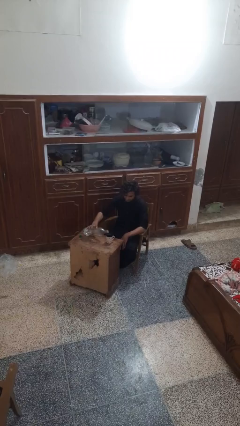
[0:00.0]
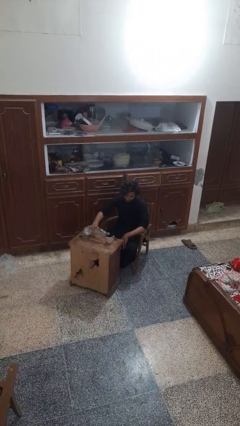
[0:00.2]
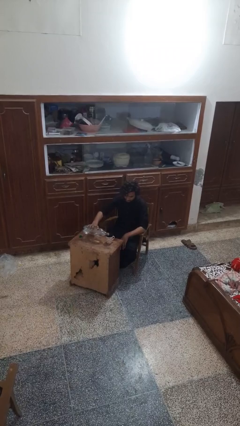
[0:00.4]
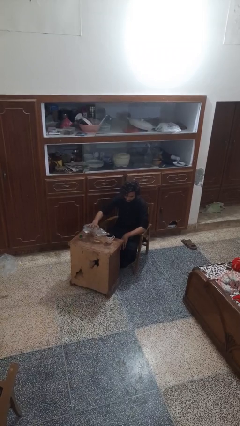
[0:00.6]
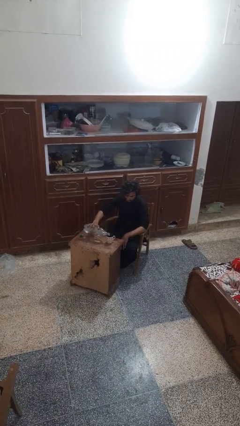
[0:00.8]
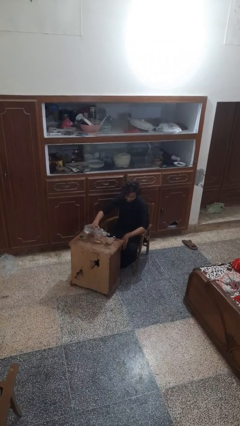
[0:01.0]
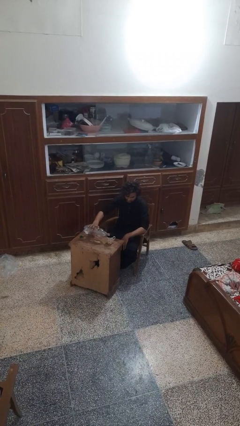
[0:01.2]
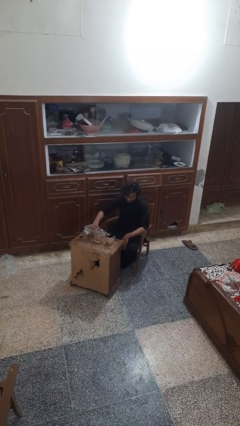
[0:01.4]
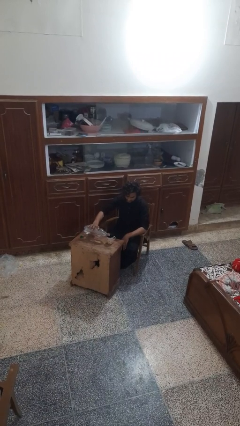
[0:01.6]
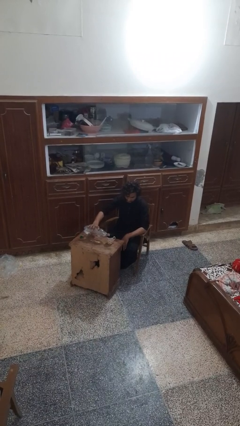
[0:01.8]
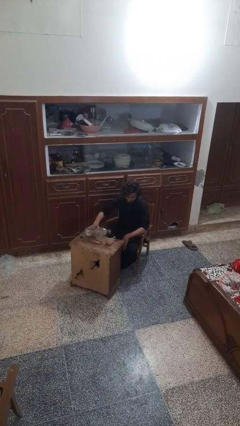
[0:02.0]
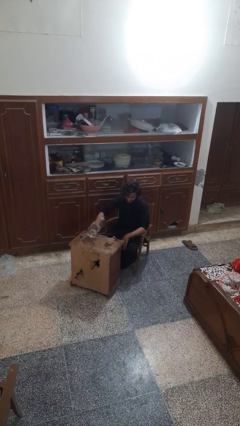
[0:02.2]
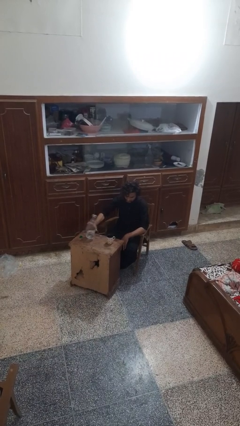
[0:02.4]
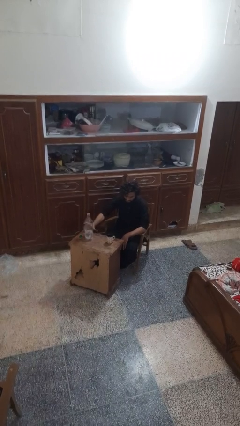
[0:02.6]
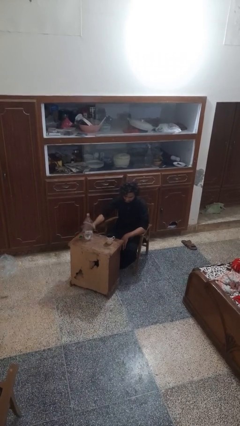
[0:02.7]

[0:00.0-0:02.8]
person pours liquid into cup

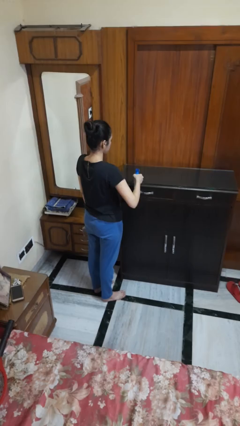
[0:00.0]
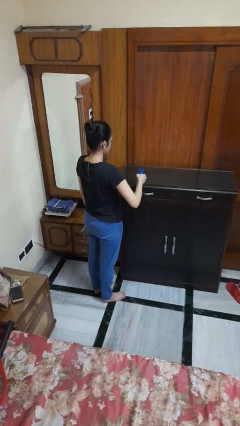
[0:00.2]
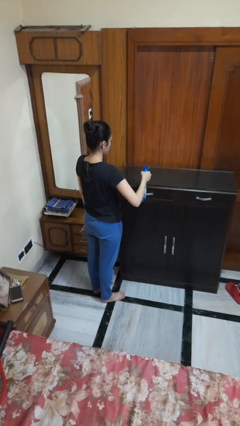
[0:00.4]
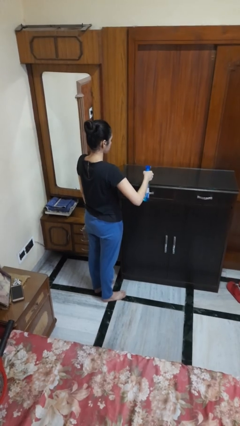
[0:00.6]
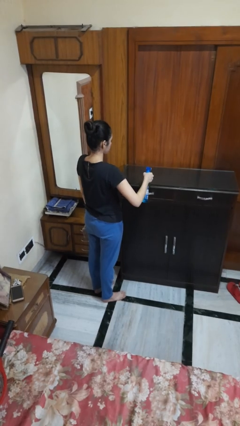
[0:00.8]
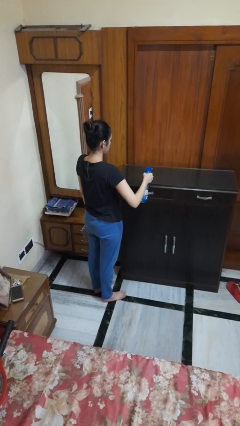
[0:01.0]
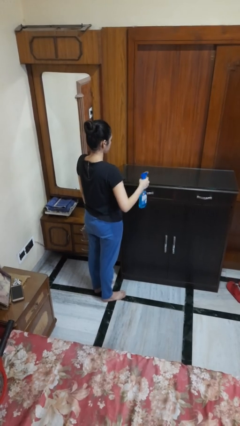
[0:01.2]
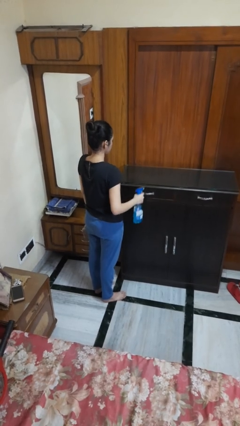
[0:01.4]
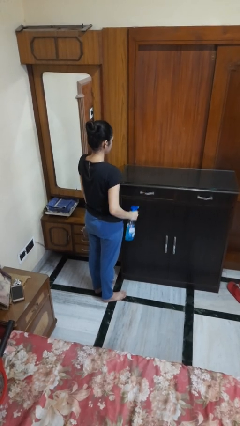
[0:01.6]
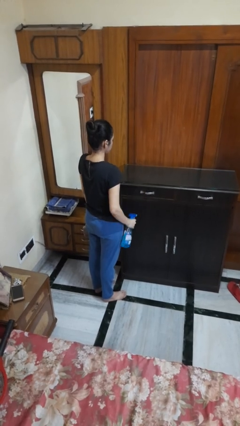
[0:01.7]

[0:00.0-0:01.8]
person sprays from bottle

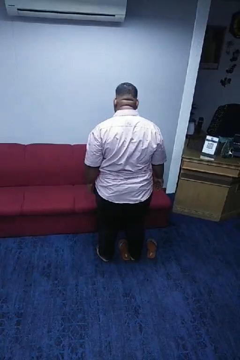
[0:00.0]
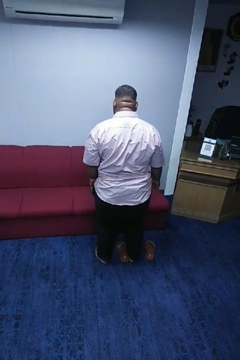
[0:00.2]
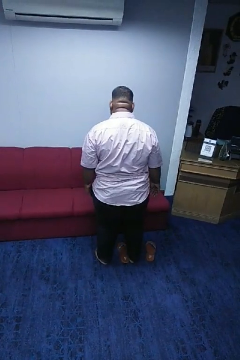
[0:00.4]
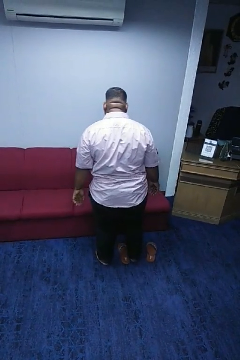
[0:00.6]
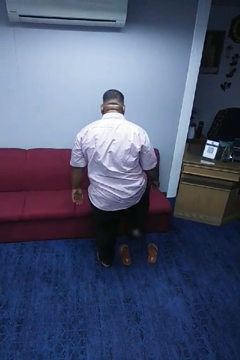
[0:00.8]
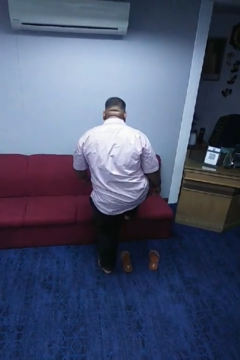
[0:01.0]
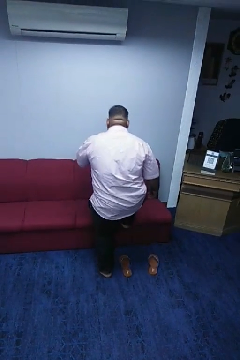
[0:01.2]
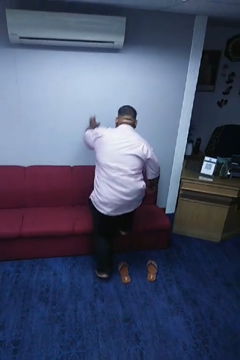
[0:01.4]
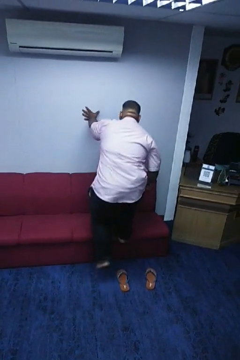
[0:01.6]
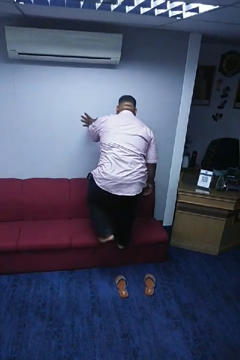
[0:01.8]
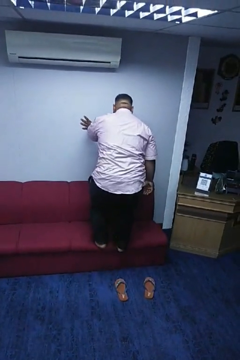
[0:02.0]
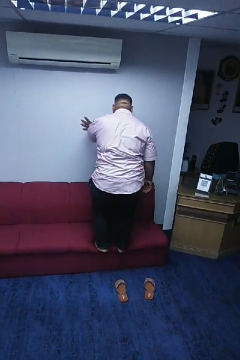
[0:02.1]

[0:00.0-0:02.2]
person climbs on couch

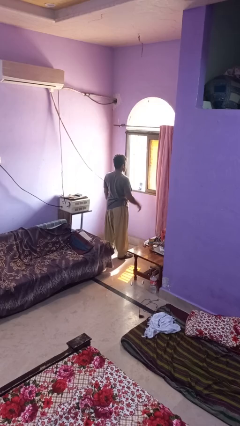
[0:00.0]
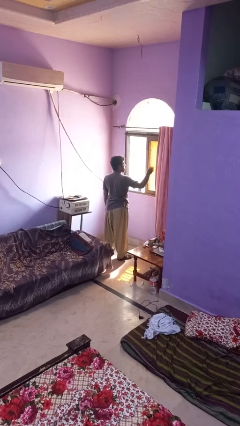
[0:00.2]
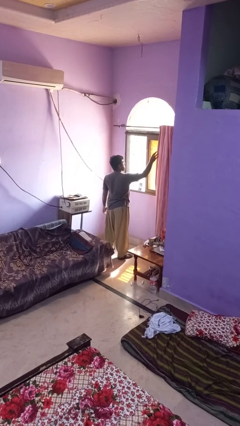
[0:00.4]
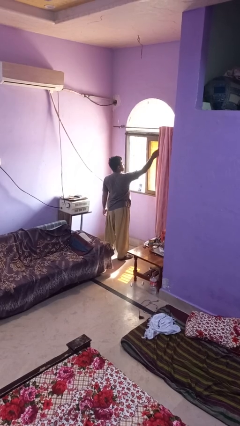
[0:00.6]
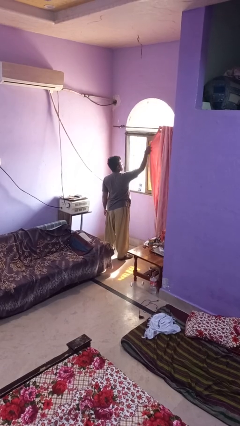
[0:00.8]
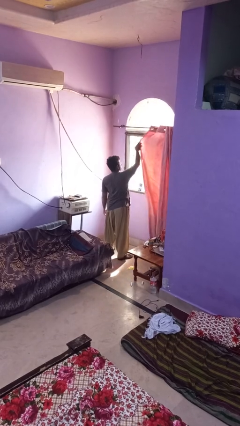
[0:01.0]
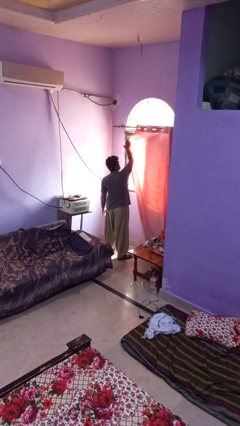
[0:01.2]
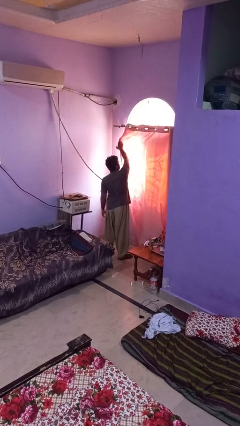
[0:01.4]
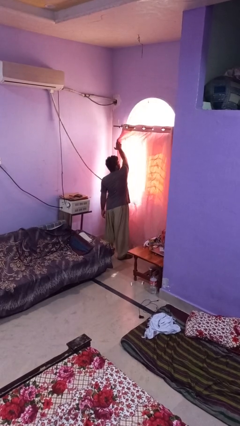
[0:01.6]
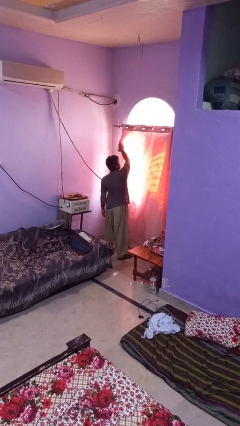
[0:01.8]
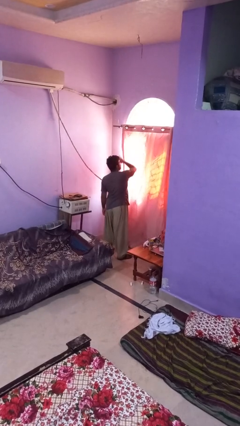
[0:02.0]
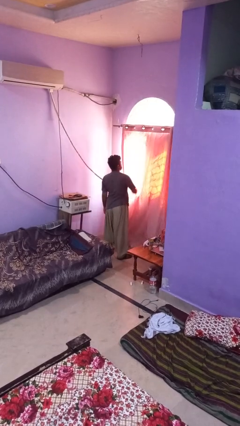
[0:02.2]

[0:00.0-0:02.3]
person closes curtains

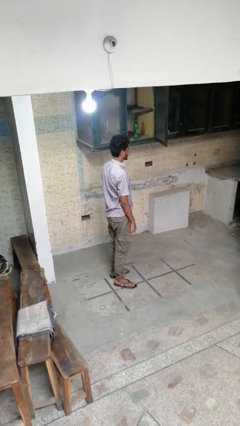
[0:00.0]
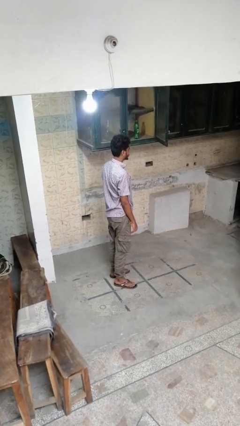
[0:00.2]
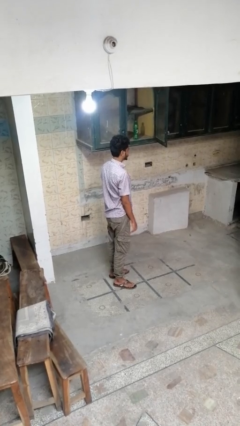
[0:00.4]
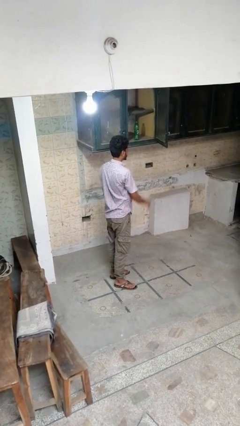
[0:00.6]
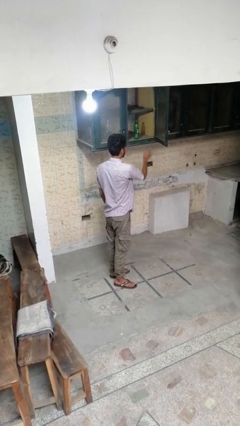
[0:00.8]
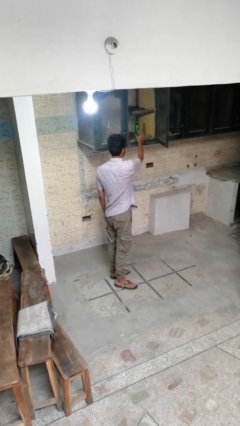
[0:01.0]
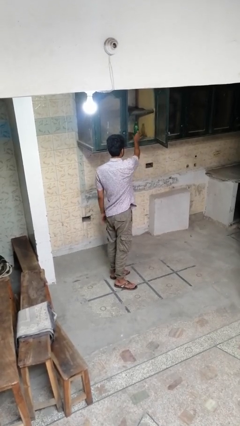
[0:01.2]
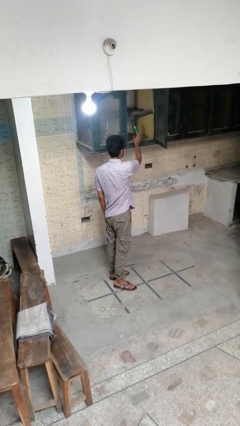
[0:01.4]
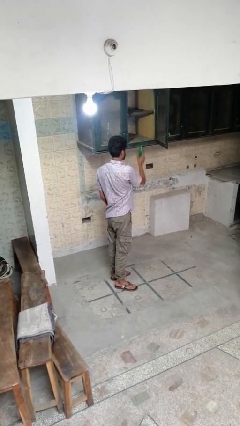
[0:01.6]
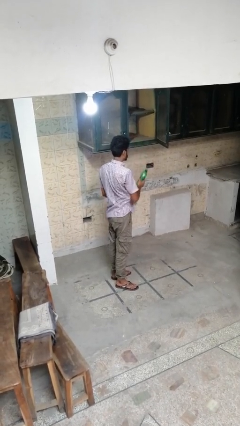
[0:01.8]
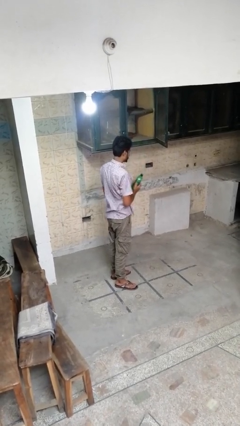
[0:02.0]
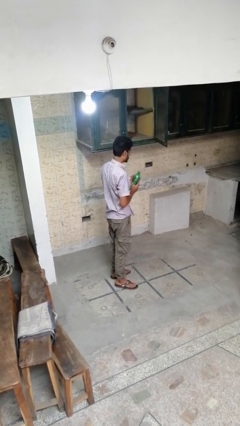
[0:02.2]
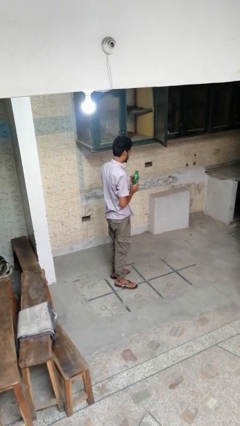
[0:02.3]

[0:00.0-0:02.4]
person picks up object from cabinet

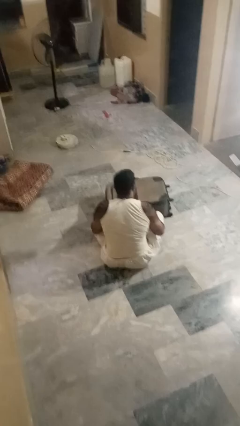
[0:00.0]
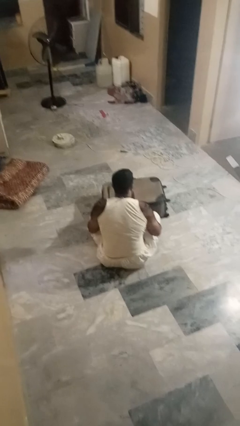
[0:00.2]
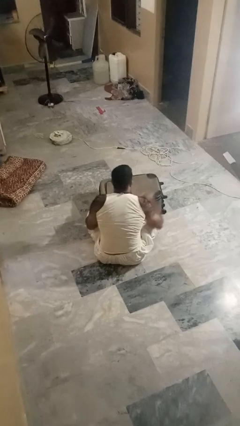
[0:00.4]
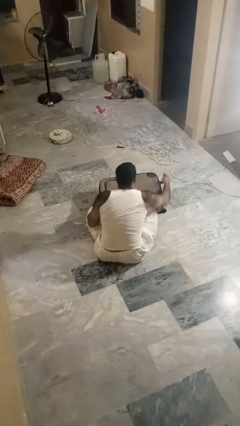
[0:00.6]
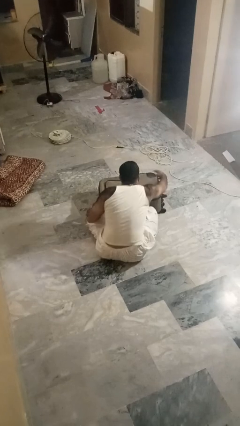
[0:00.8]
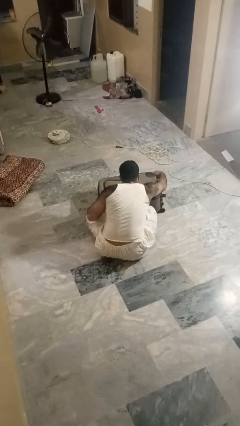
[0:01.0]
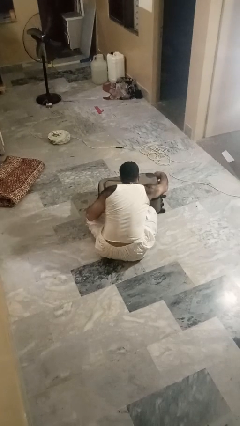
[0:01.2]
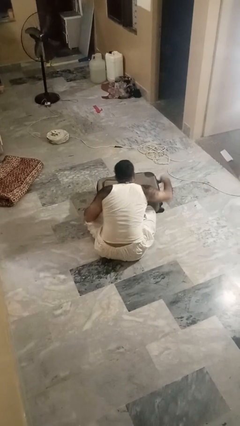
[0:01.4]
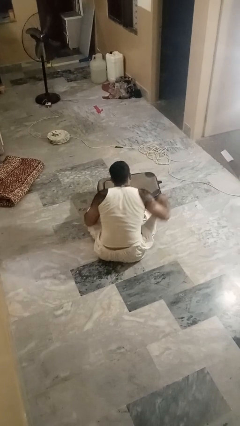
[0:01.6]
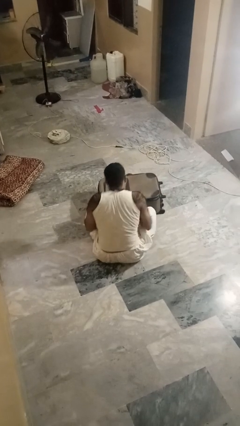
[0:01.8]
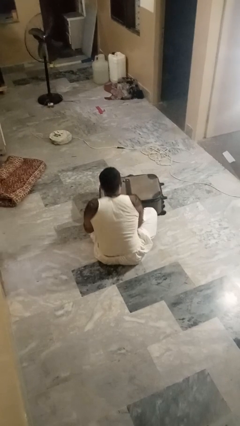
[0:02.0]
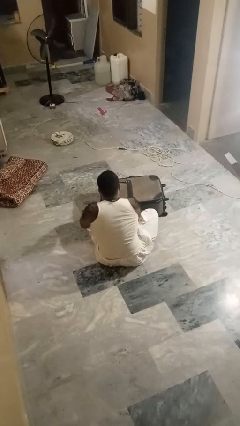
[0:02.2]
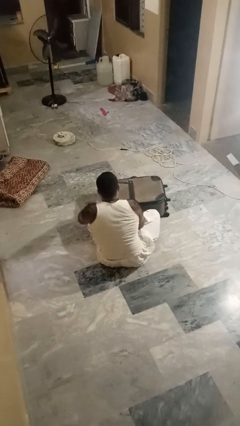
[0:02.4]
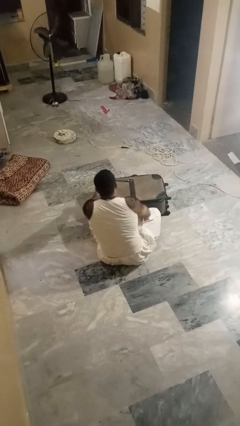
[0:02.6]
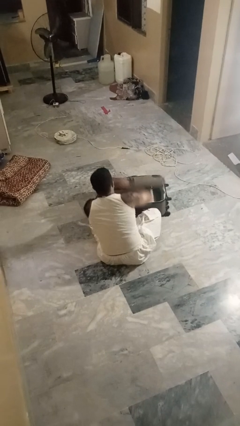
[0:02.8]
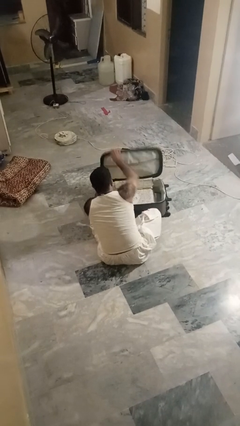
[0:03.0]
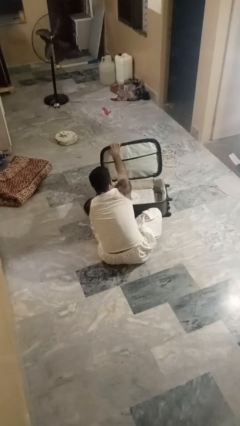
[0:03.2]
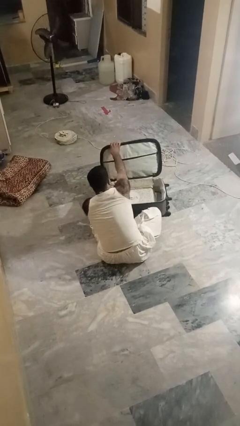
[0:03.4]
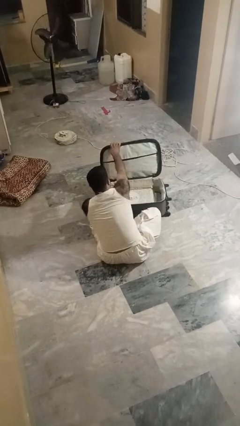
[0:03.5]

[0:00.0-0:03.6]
person opens suitcase

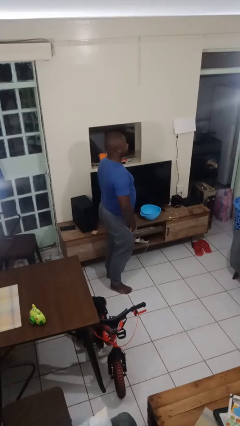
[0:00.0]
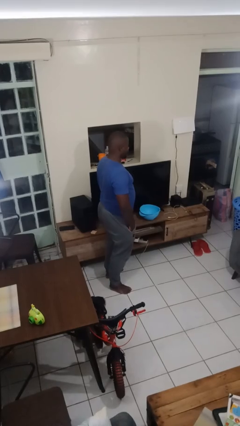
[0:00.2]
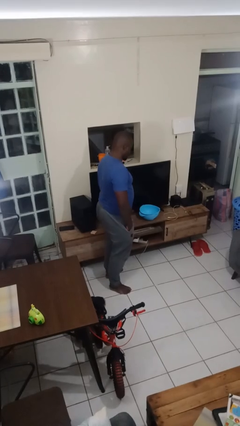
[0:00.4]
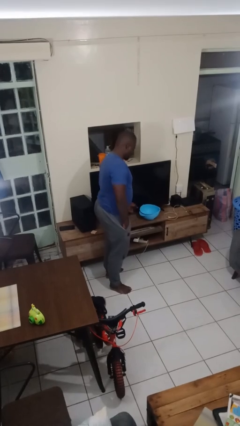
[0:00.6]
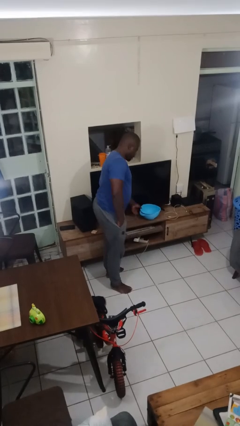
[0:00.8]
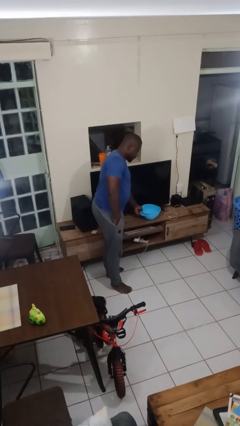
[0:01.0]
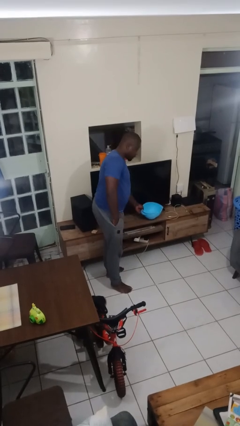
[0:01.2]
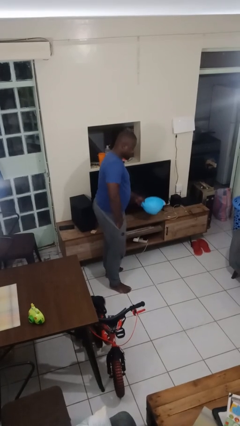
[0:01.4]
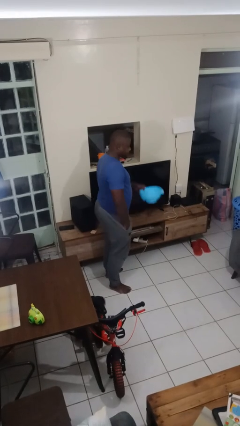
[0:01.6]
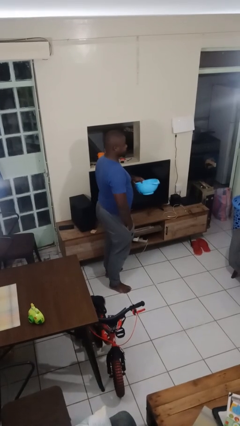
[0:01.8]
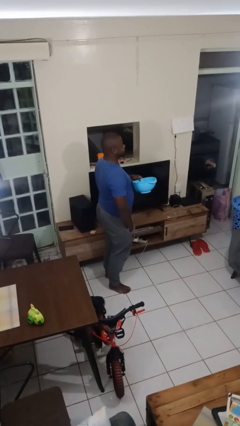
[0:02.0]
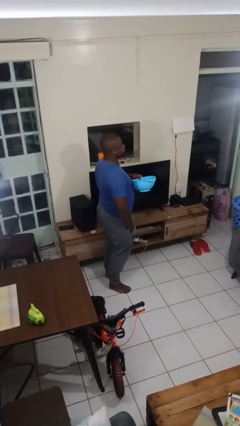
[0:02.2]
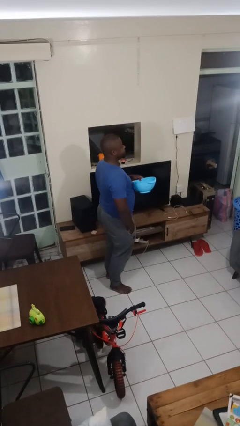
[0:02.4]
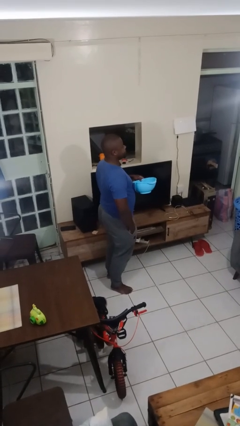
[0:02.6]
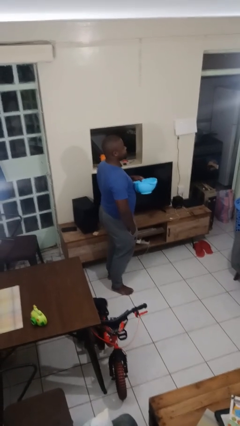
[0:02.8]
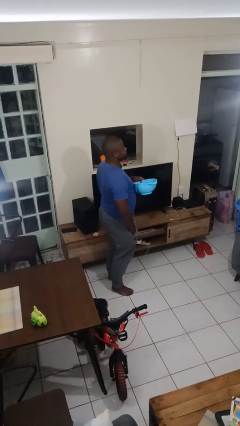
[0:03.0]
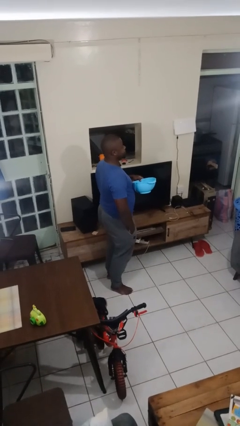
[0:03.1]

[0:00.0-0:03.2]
person picks up object from countertop
